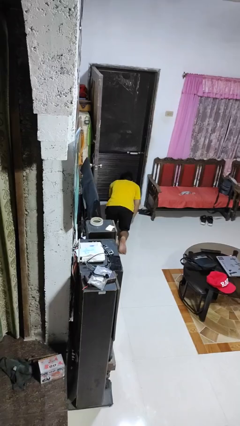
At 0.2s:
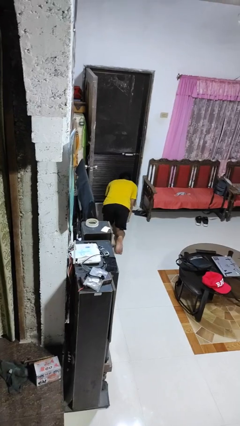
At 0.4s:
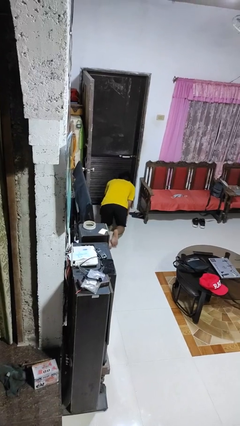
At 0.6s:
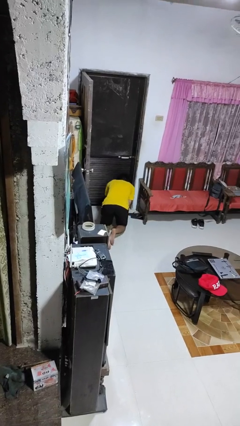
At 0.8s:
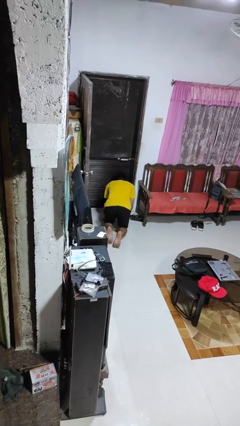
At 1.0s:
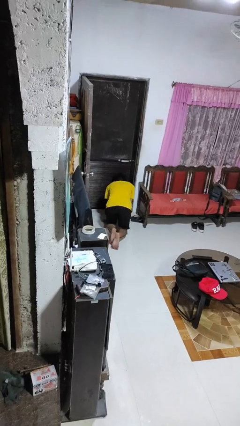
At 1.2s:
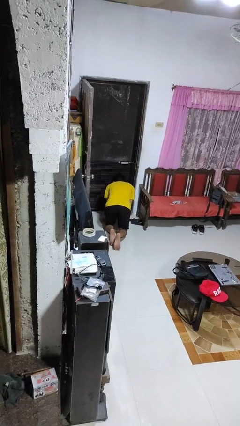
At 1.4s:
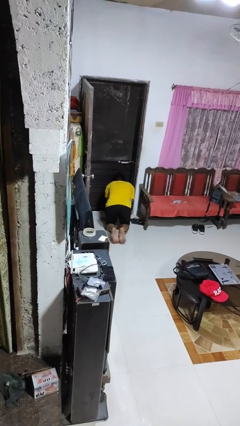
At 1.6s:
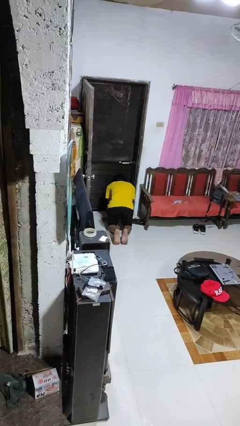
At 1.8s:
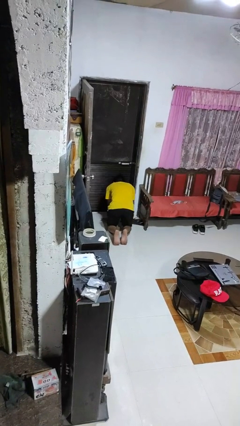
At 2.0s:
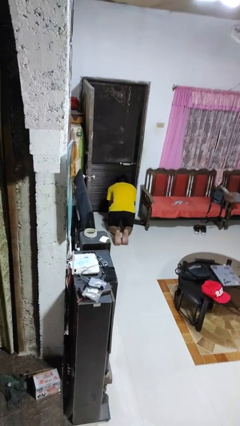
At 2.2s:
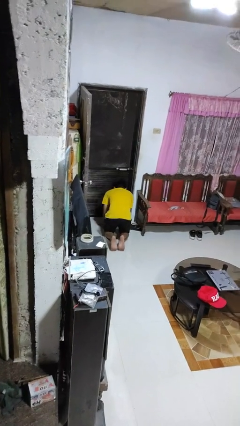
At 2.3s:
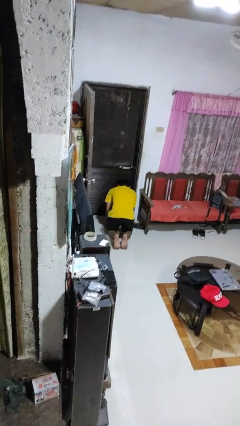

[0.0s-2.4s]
person crawls

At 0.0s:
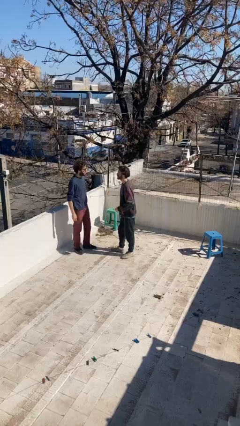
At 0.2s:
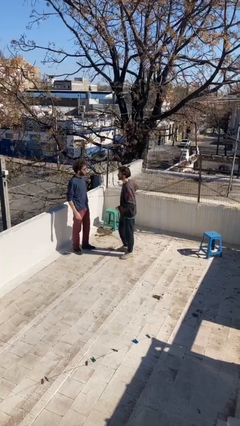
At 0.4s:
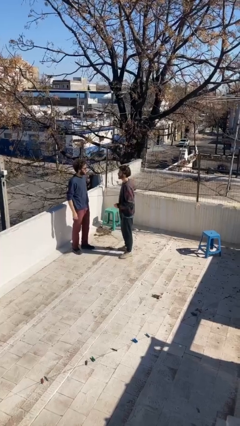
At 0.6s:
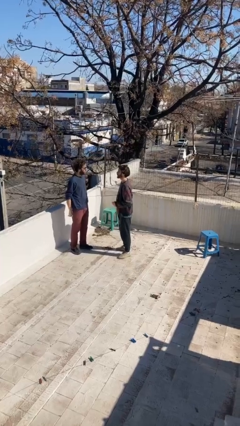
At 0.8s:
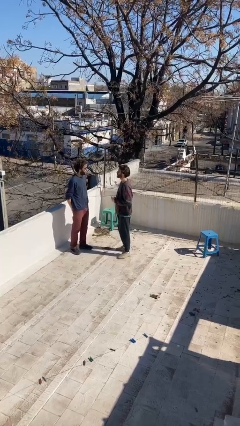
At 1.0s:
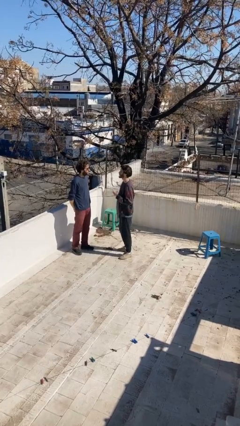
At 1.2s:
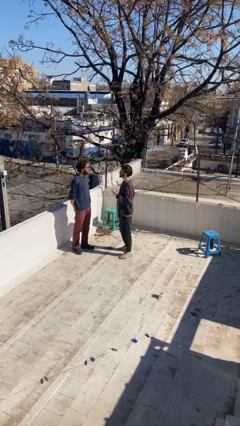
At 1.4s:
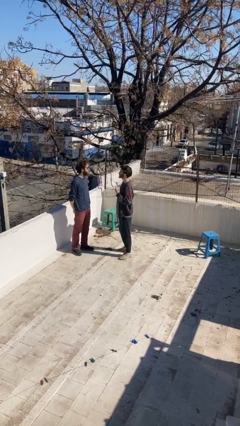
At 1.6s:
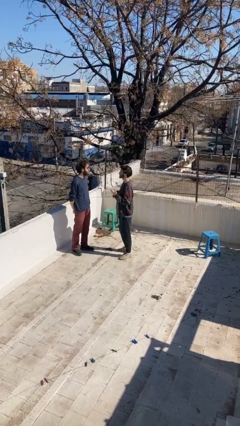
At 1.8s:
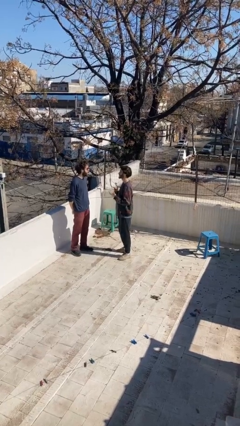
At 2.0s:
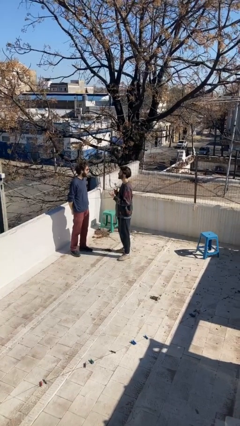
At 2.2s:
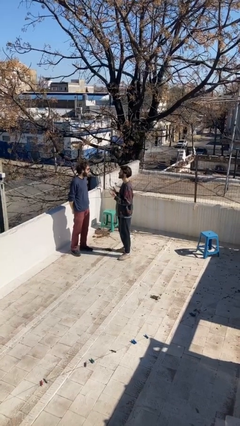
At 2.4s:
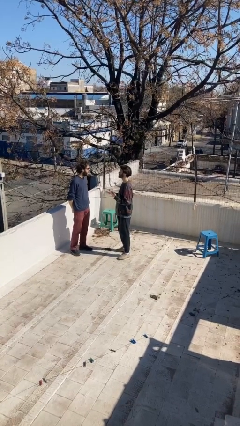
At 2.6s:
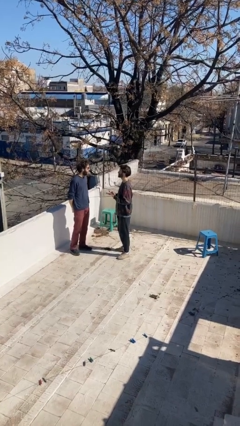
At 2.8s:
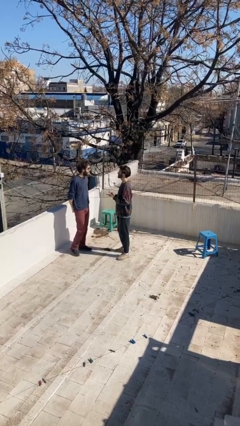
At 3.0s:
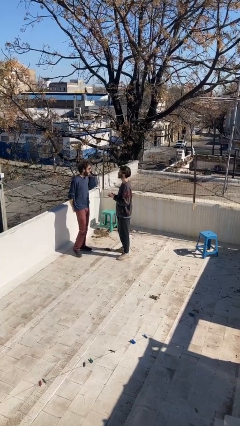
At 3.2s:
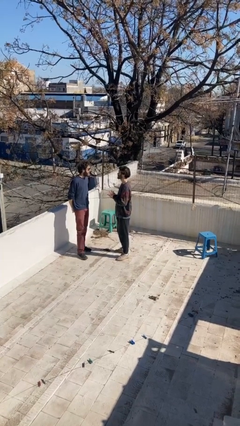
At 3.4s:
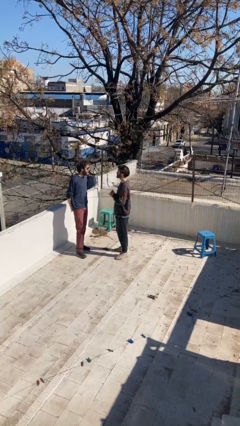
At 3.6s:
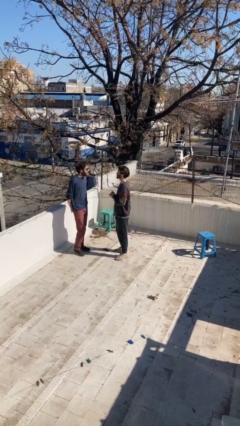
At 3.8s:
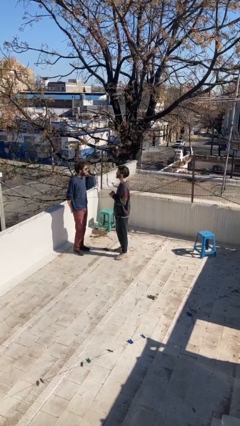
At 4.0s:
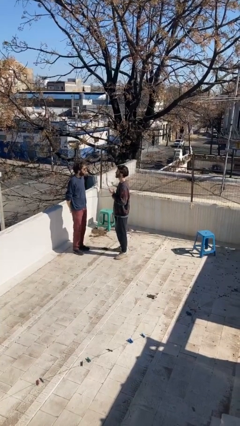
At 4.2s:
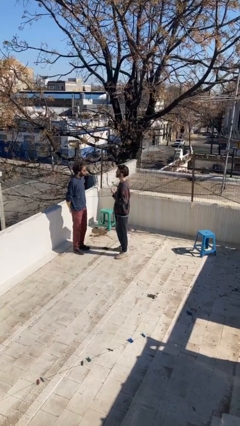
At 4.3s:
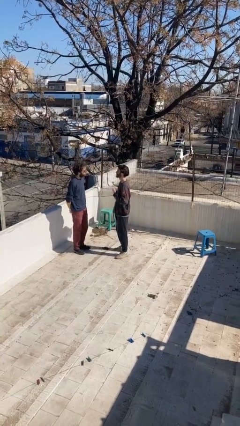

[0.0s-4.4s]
person talks to person

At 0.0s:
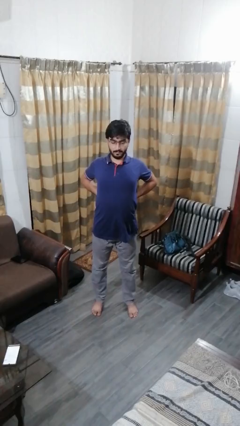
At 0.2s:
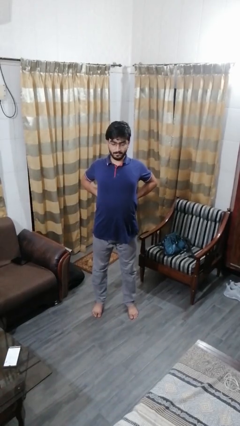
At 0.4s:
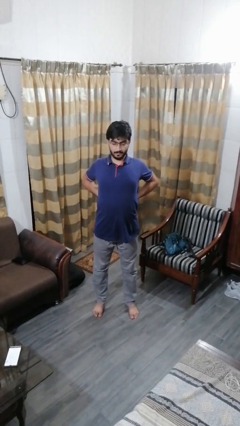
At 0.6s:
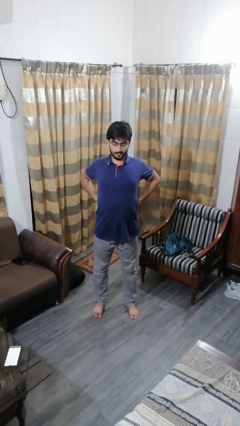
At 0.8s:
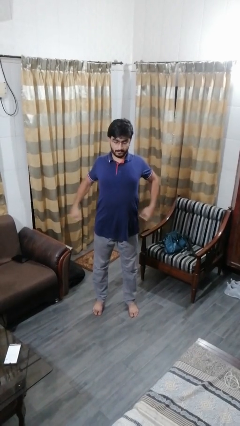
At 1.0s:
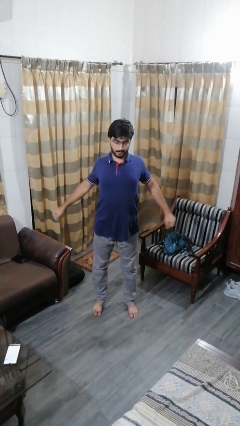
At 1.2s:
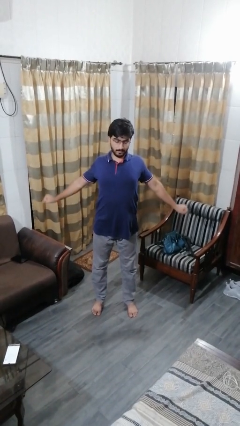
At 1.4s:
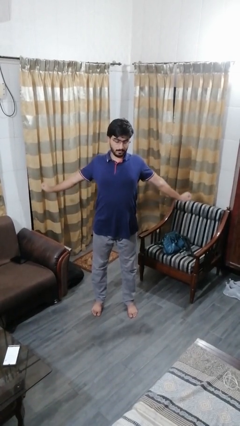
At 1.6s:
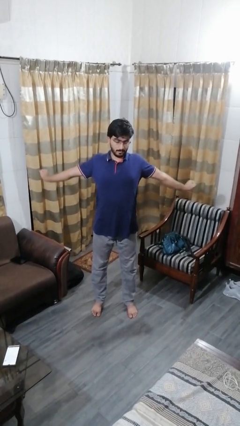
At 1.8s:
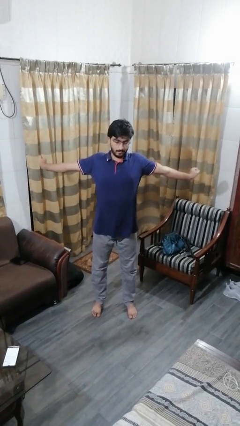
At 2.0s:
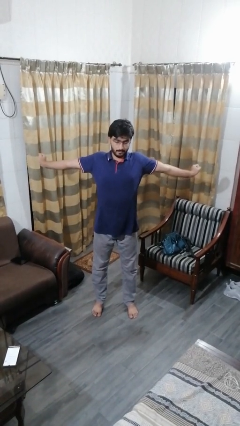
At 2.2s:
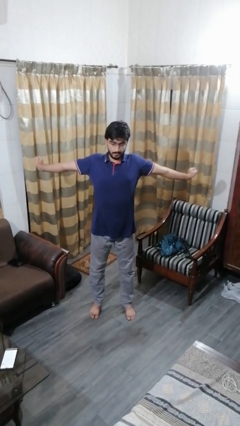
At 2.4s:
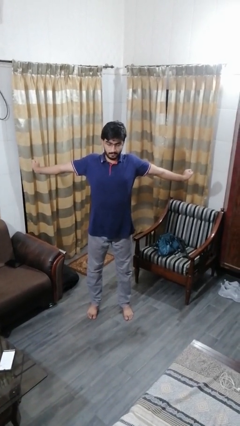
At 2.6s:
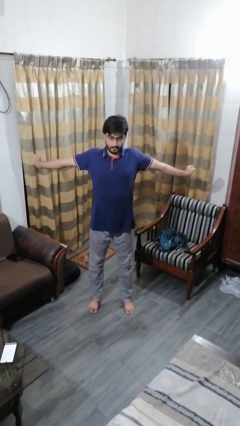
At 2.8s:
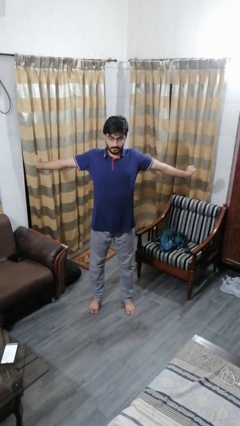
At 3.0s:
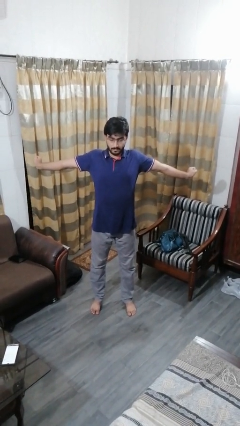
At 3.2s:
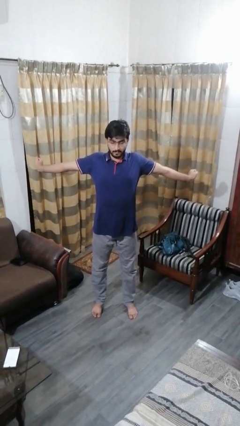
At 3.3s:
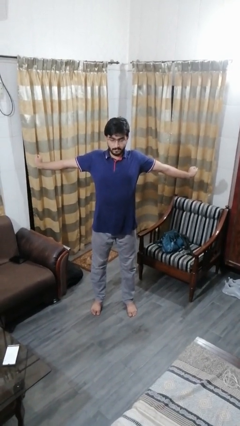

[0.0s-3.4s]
person stretches arms to side

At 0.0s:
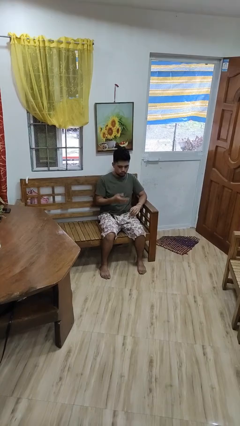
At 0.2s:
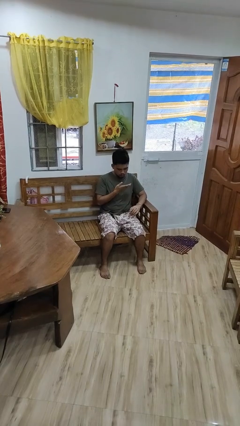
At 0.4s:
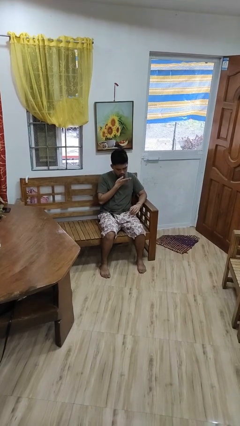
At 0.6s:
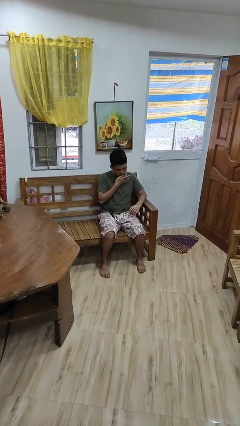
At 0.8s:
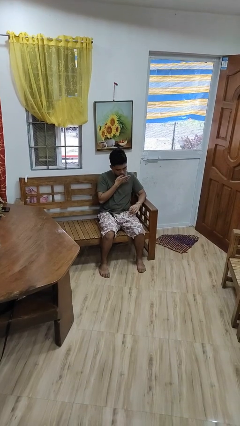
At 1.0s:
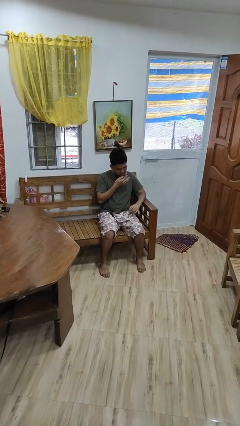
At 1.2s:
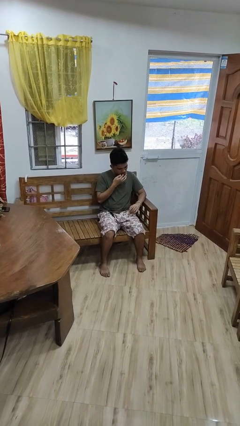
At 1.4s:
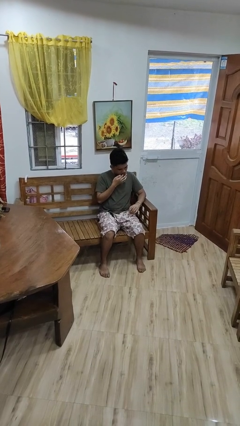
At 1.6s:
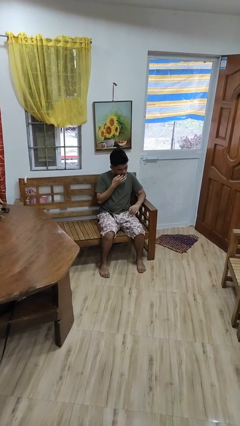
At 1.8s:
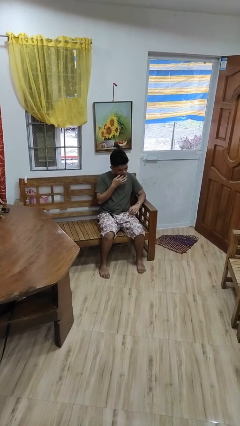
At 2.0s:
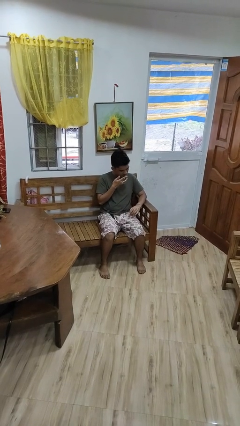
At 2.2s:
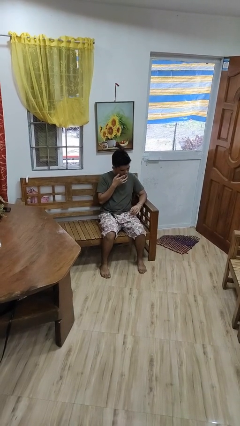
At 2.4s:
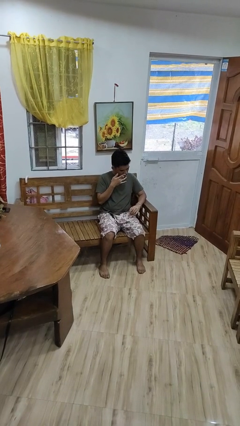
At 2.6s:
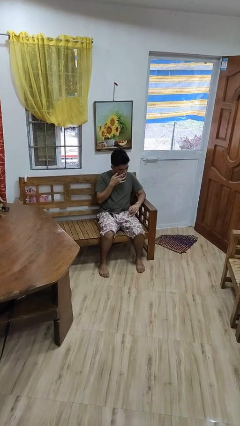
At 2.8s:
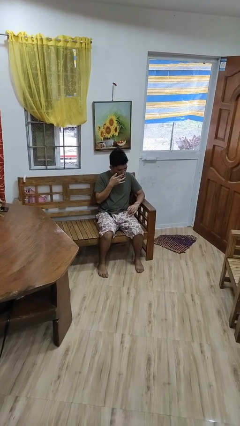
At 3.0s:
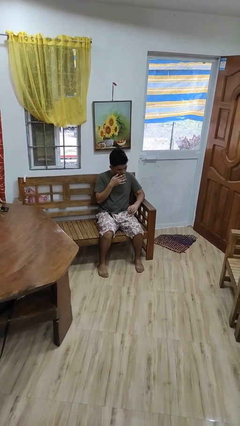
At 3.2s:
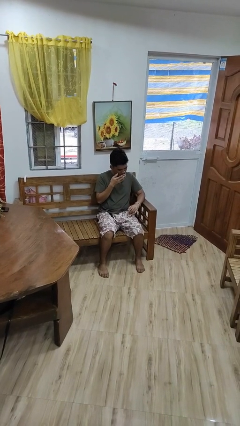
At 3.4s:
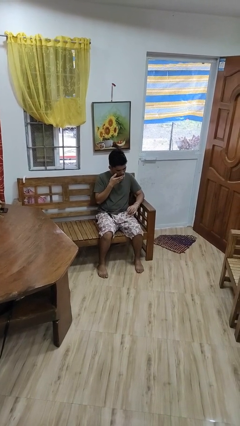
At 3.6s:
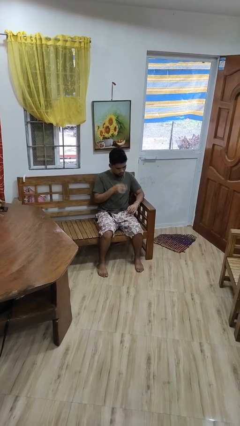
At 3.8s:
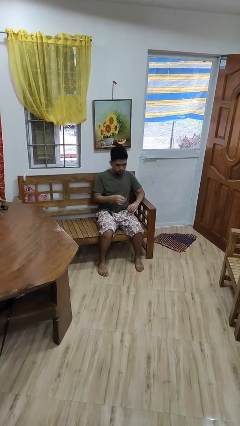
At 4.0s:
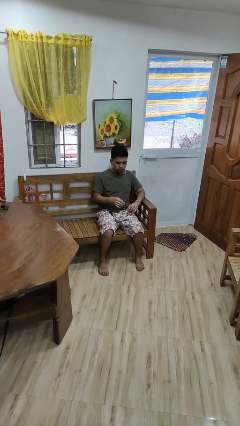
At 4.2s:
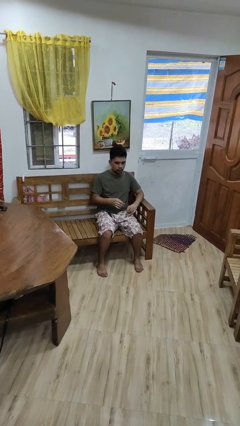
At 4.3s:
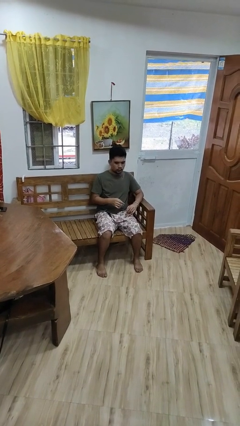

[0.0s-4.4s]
person licks fingers

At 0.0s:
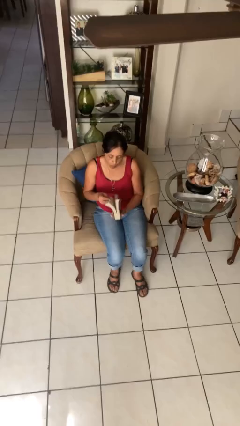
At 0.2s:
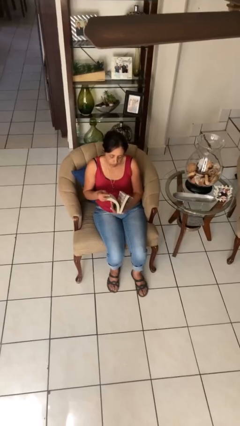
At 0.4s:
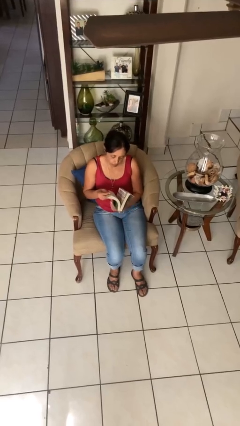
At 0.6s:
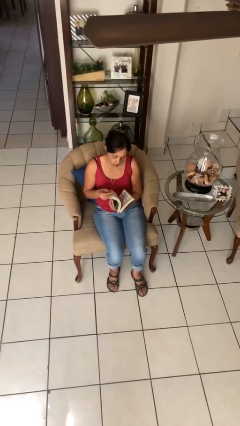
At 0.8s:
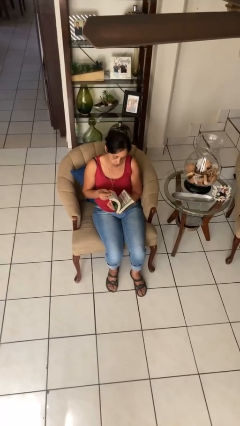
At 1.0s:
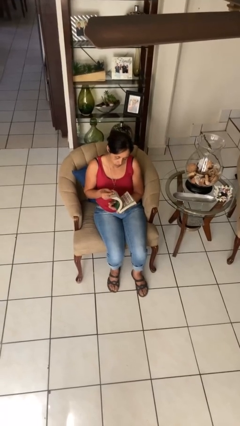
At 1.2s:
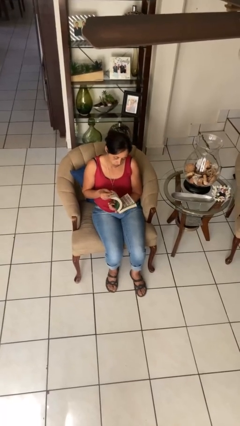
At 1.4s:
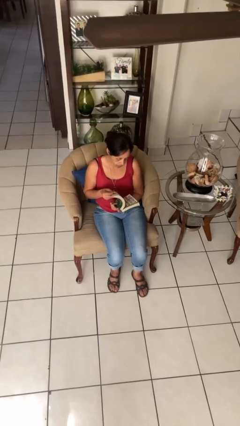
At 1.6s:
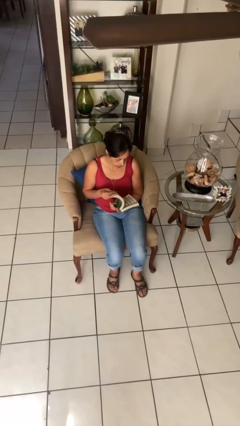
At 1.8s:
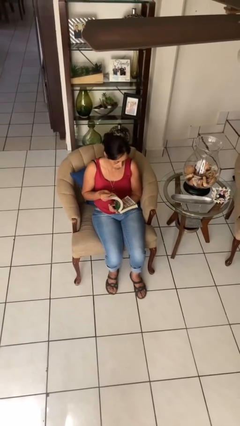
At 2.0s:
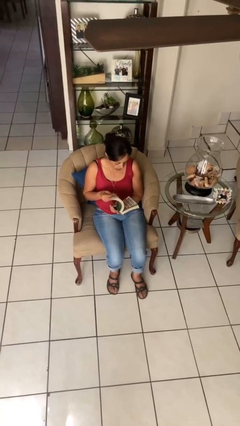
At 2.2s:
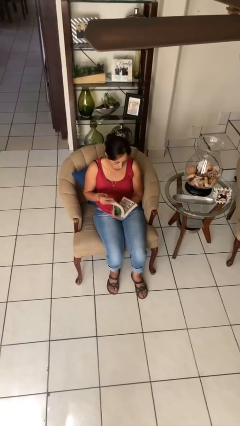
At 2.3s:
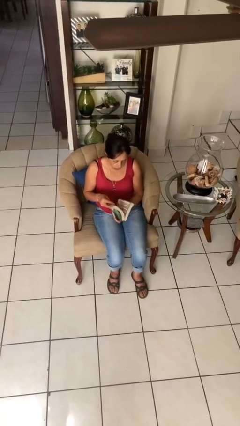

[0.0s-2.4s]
person reads book

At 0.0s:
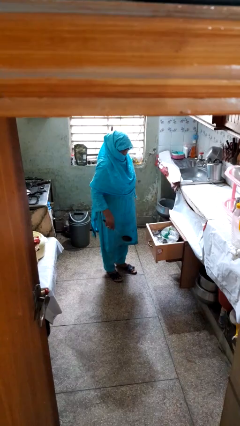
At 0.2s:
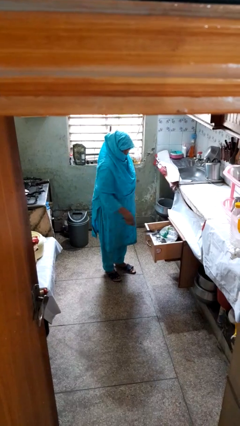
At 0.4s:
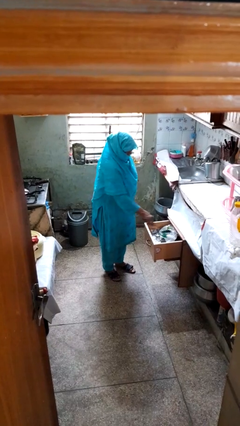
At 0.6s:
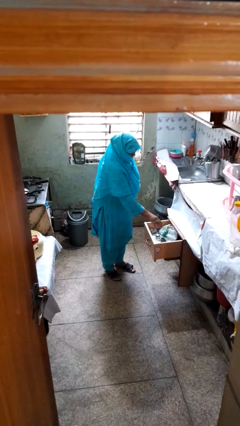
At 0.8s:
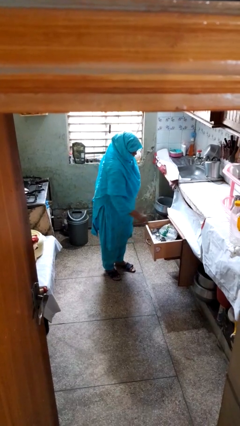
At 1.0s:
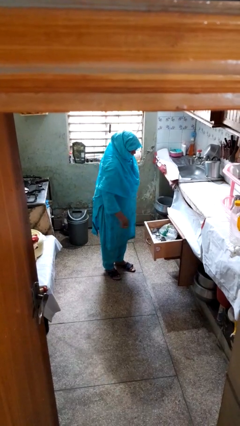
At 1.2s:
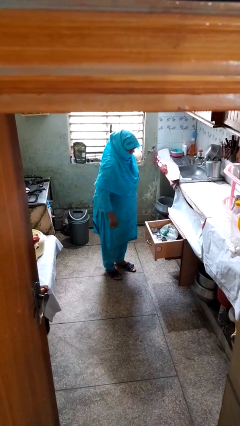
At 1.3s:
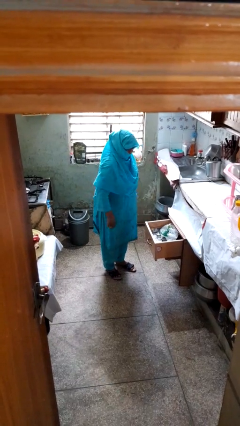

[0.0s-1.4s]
person puts object into kitchen drawer
